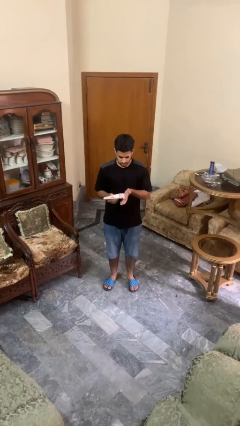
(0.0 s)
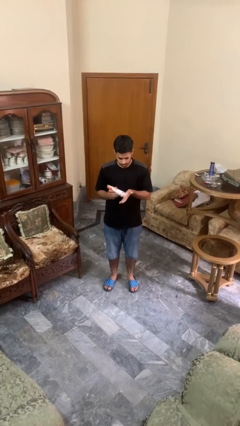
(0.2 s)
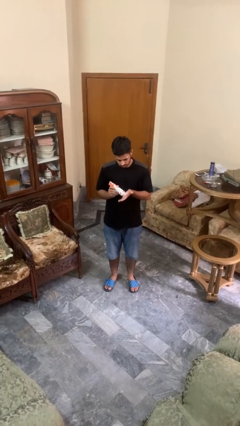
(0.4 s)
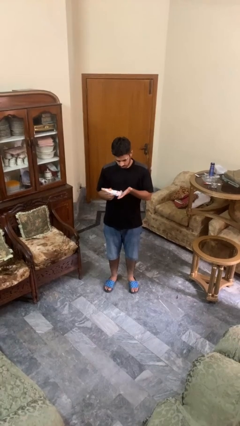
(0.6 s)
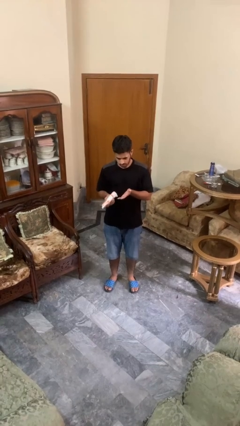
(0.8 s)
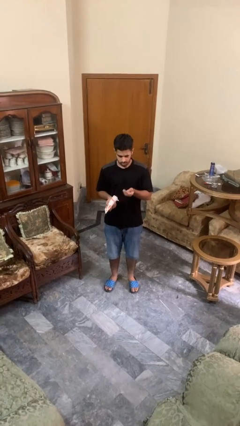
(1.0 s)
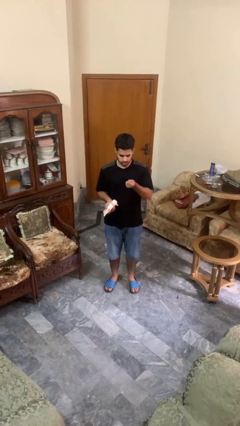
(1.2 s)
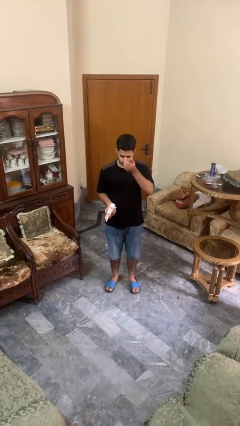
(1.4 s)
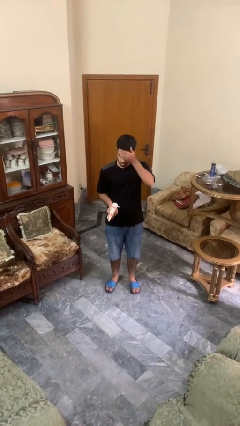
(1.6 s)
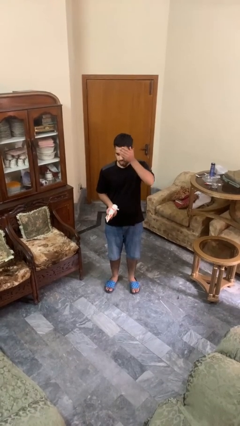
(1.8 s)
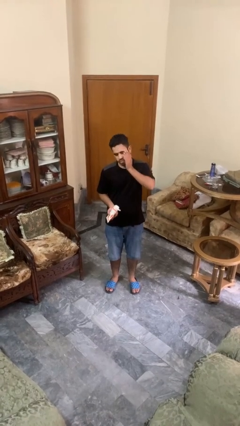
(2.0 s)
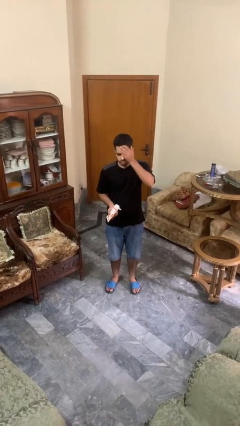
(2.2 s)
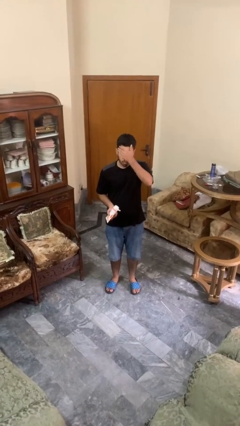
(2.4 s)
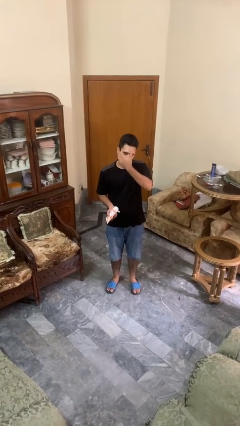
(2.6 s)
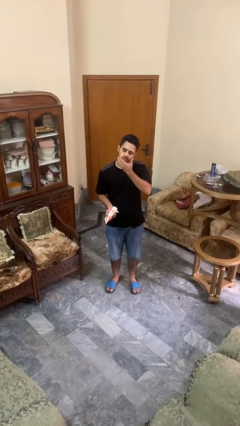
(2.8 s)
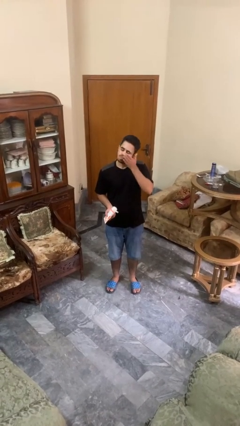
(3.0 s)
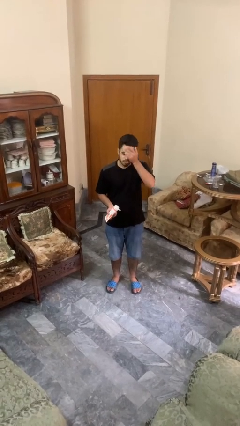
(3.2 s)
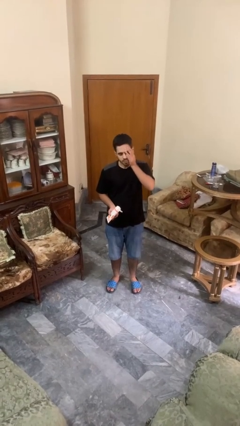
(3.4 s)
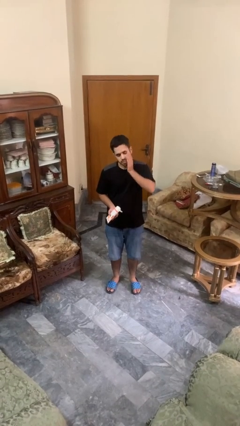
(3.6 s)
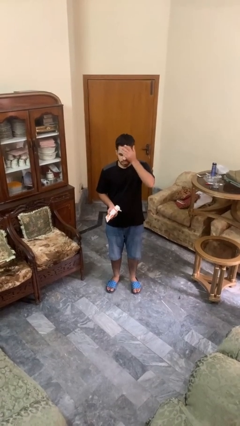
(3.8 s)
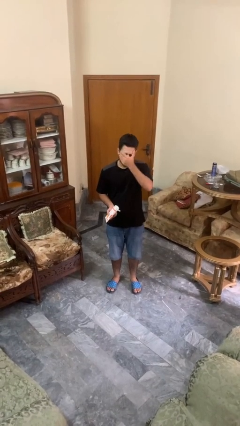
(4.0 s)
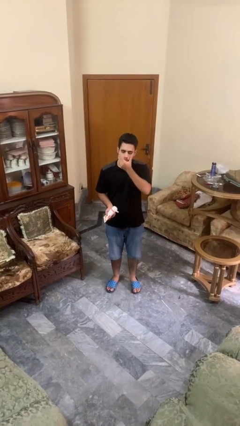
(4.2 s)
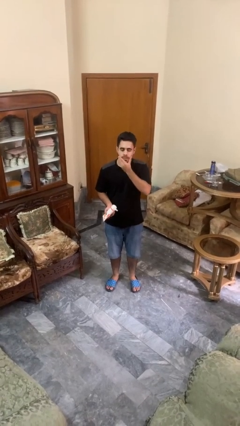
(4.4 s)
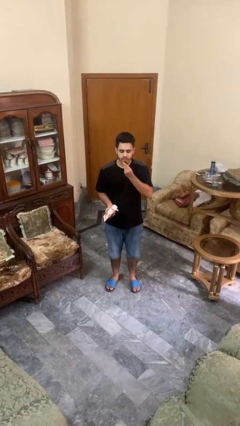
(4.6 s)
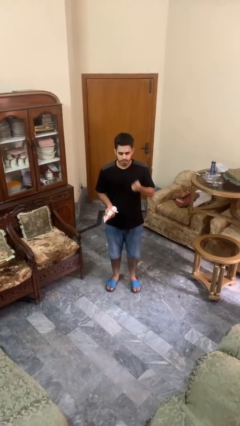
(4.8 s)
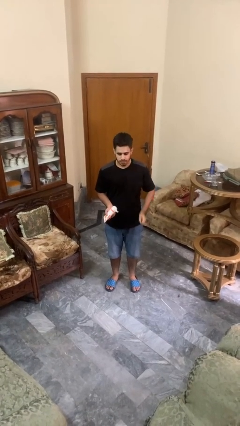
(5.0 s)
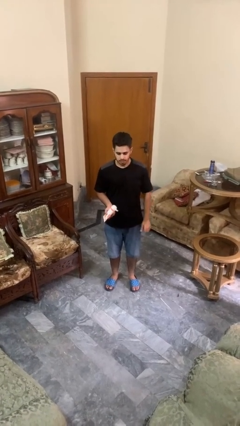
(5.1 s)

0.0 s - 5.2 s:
person applies sunscreen

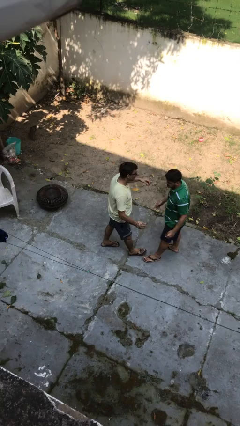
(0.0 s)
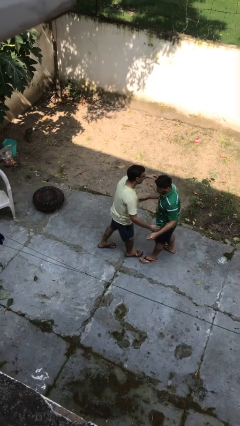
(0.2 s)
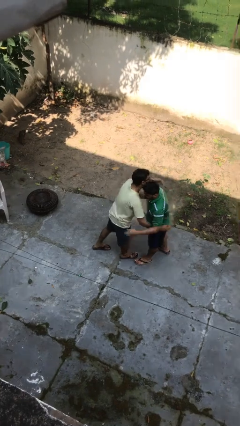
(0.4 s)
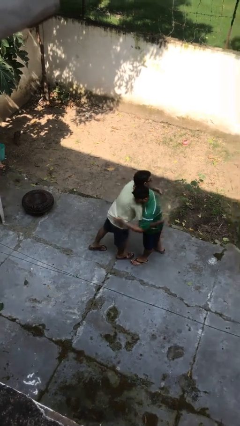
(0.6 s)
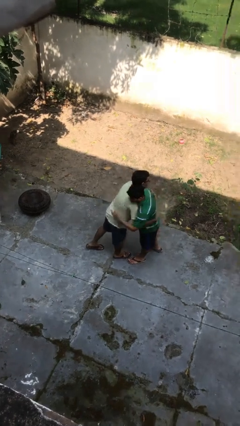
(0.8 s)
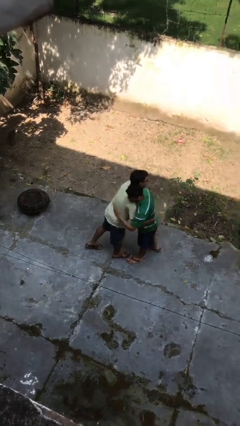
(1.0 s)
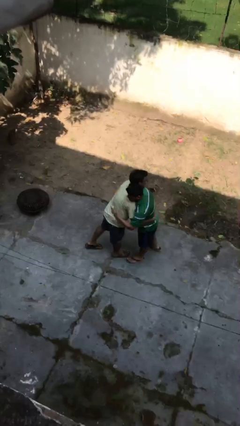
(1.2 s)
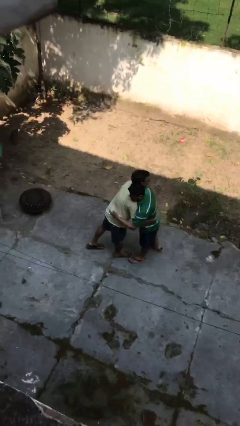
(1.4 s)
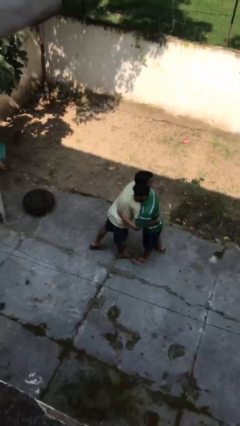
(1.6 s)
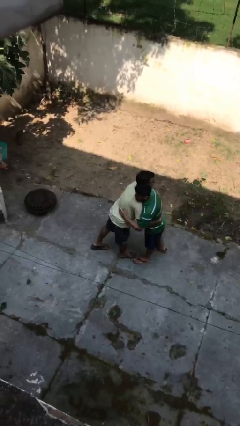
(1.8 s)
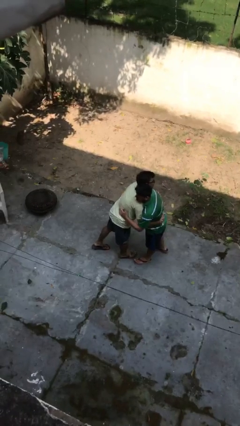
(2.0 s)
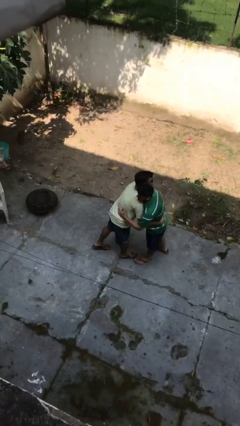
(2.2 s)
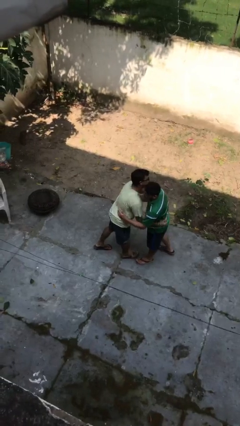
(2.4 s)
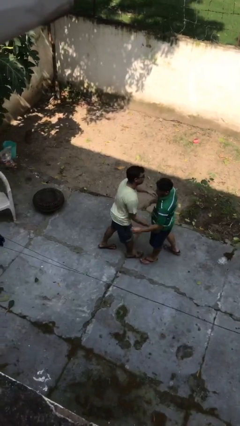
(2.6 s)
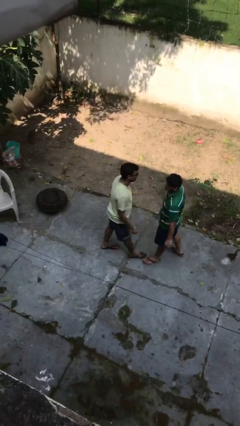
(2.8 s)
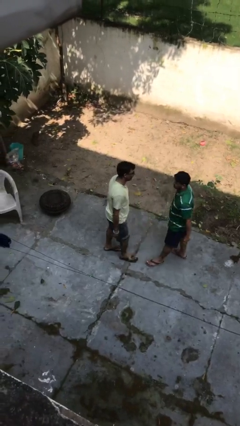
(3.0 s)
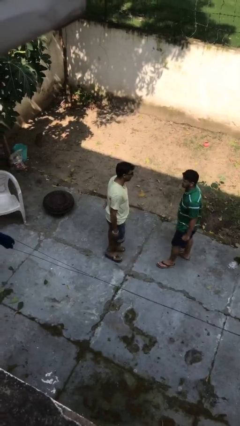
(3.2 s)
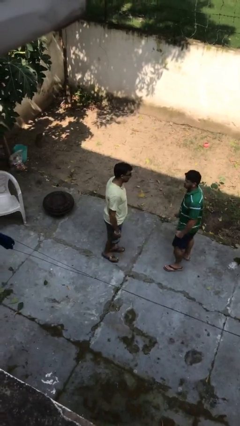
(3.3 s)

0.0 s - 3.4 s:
person embraces person

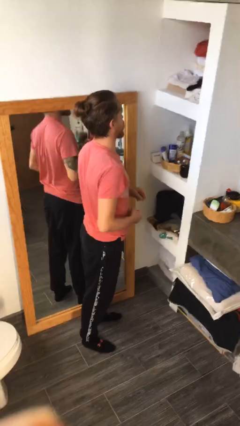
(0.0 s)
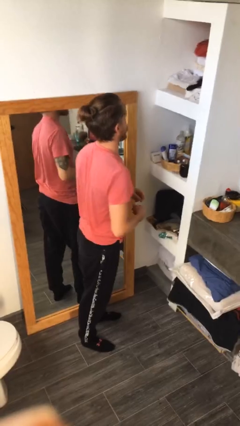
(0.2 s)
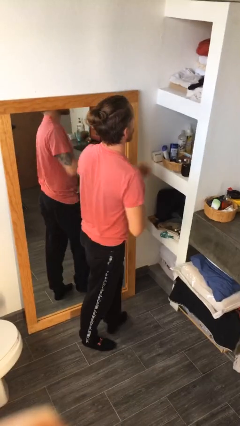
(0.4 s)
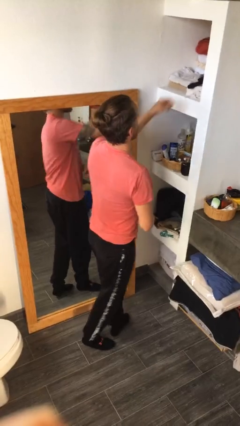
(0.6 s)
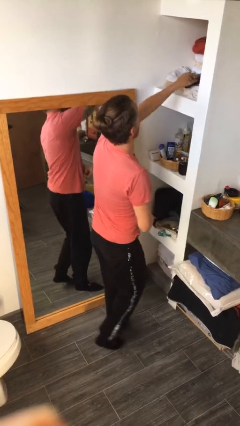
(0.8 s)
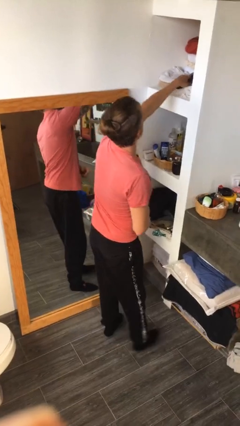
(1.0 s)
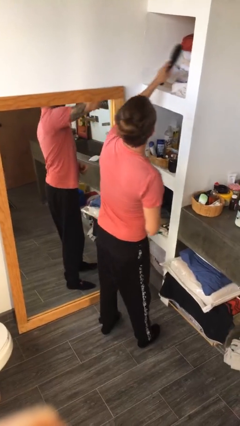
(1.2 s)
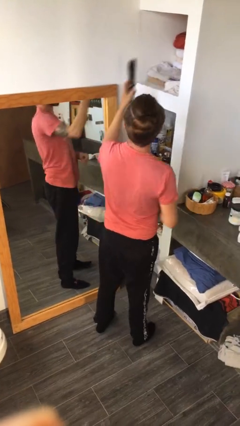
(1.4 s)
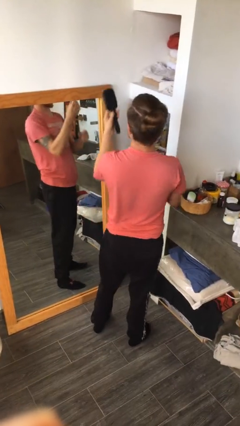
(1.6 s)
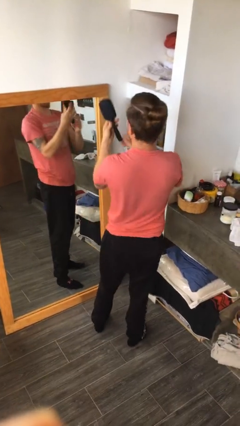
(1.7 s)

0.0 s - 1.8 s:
person picks up object from countertop

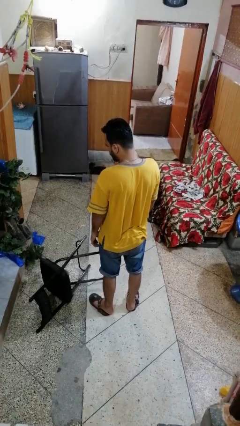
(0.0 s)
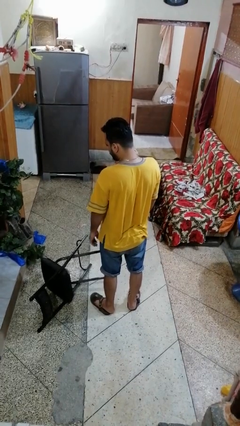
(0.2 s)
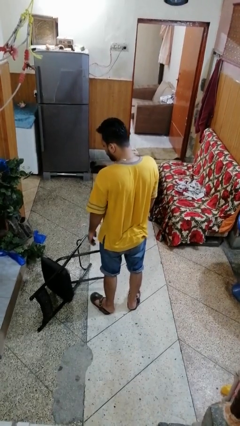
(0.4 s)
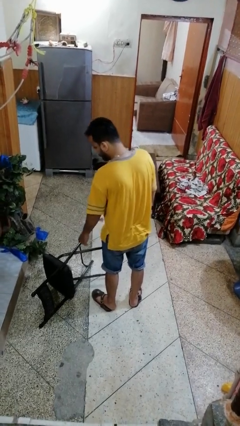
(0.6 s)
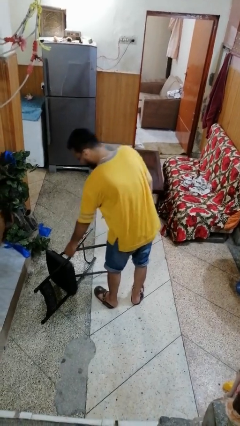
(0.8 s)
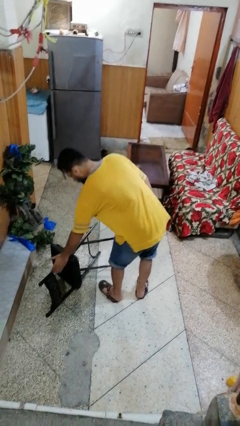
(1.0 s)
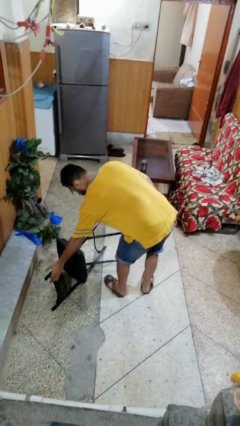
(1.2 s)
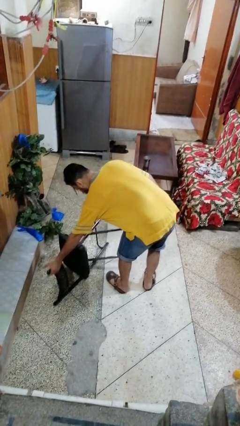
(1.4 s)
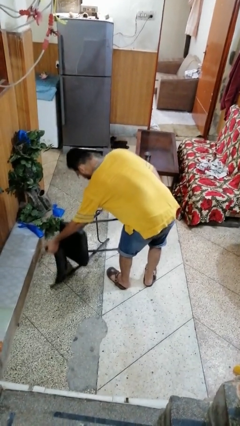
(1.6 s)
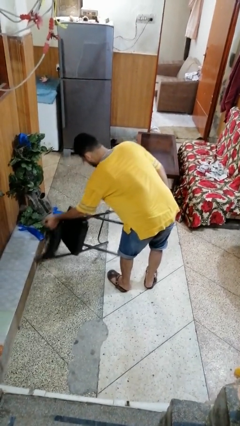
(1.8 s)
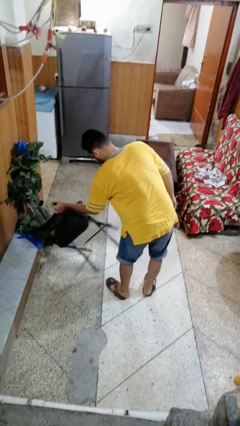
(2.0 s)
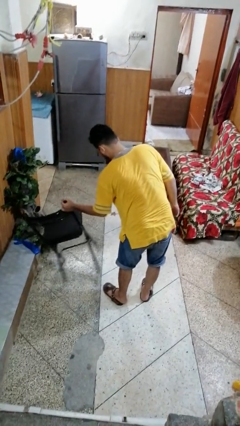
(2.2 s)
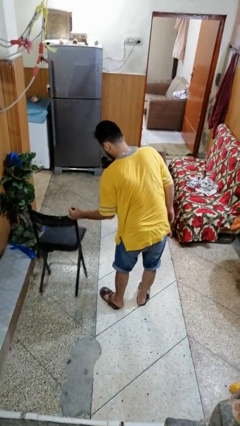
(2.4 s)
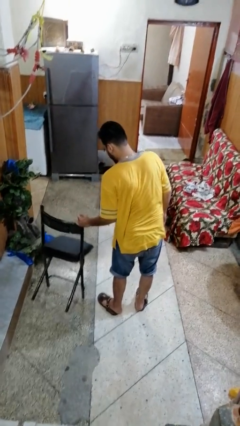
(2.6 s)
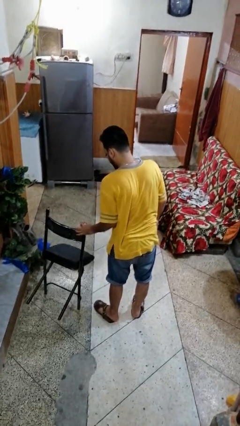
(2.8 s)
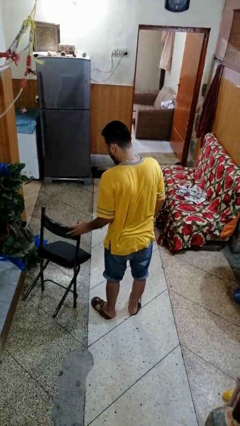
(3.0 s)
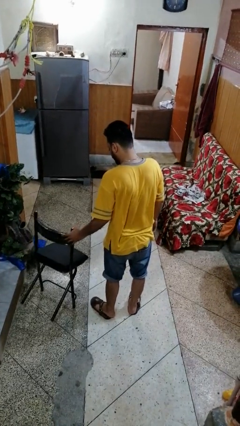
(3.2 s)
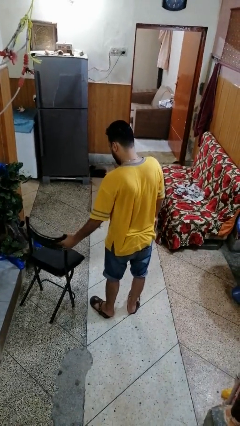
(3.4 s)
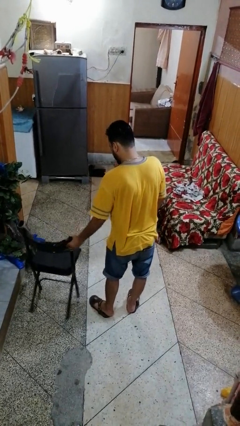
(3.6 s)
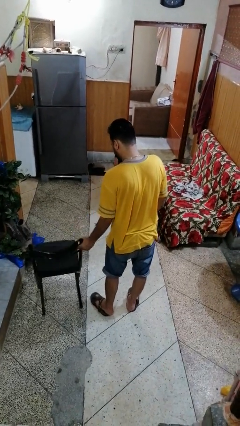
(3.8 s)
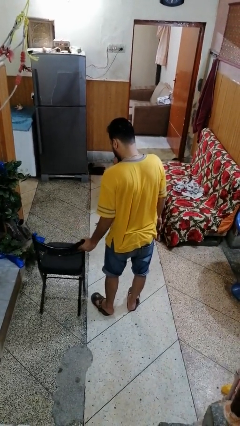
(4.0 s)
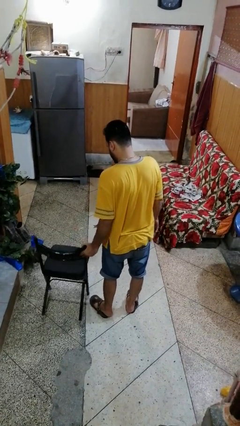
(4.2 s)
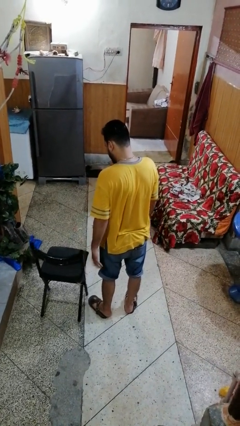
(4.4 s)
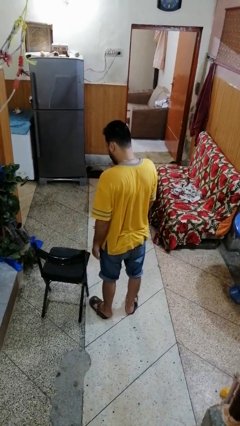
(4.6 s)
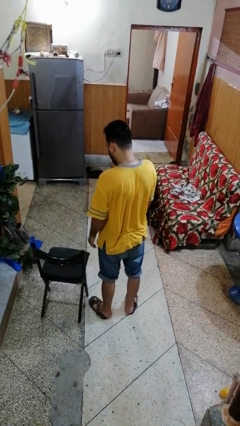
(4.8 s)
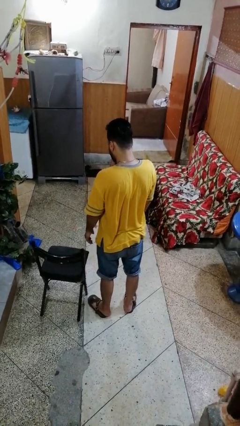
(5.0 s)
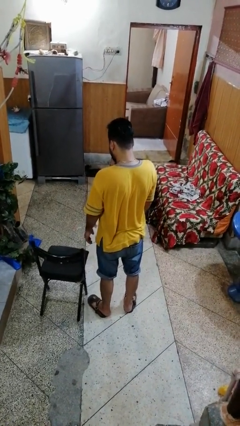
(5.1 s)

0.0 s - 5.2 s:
person sets upright furniture

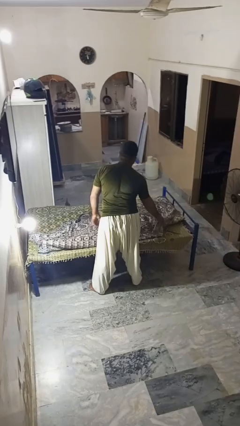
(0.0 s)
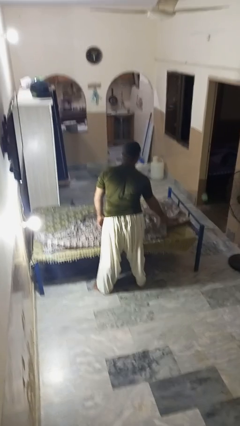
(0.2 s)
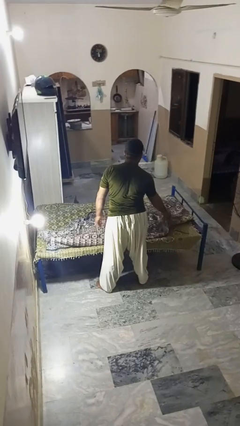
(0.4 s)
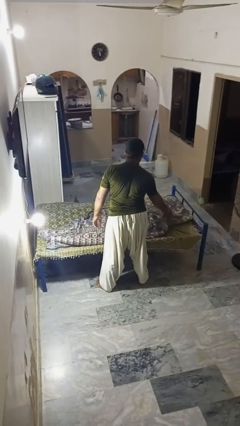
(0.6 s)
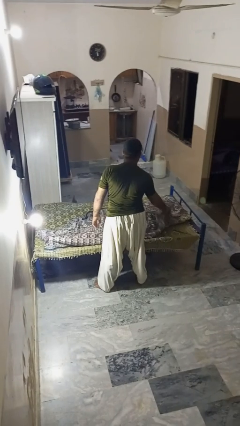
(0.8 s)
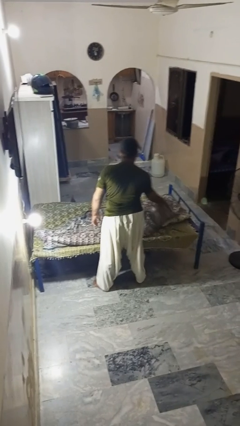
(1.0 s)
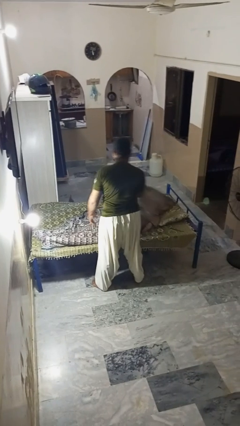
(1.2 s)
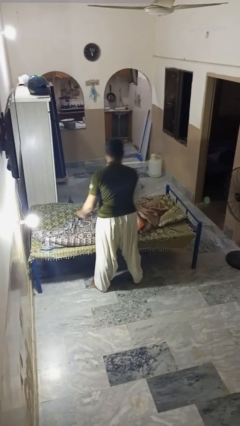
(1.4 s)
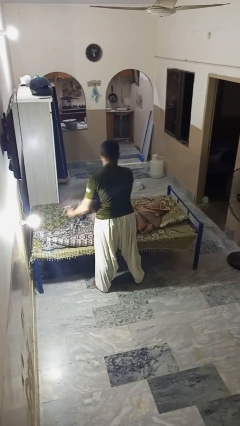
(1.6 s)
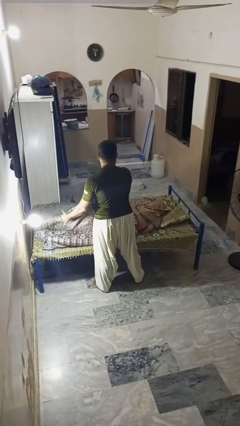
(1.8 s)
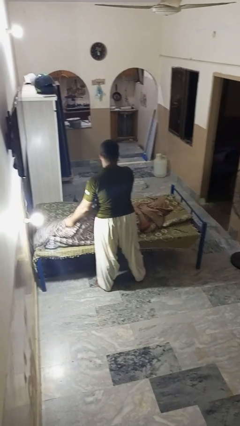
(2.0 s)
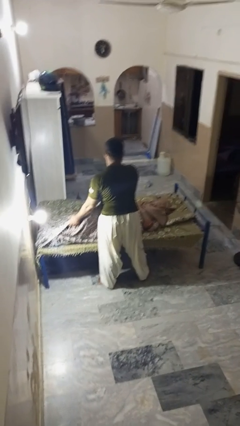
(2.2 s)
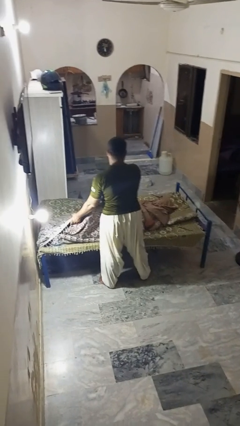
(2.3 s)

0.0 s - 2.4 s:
person uncovers friend with blanket
